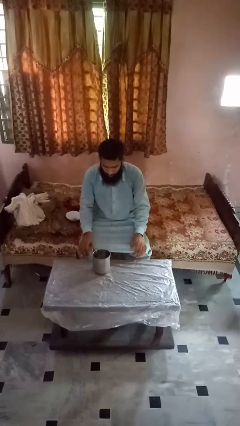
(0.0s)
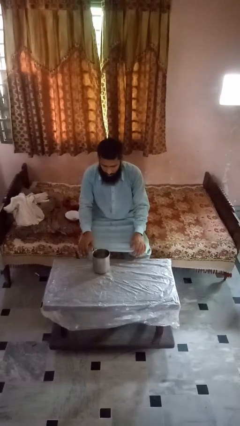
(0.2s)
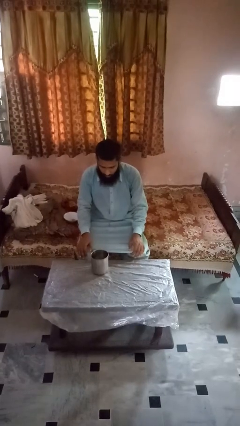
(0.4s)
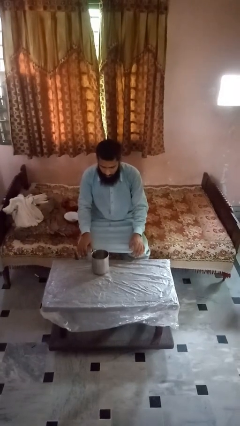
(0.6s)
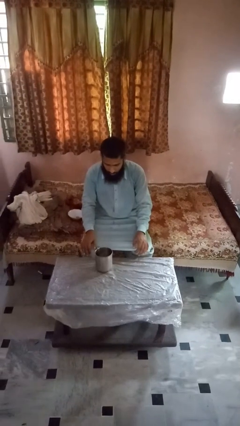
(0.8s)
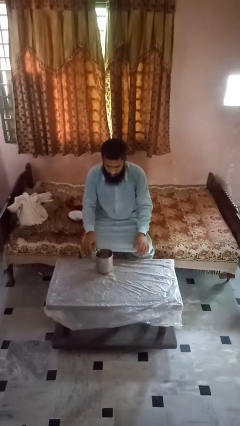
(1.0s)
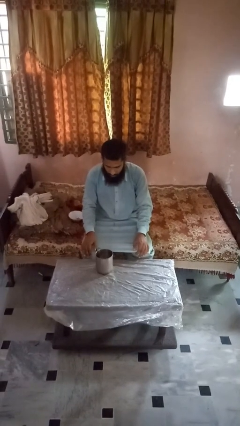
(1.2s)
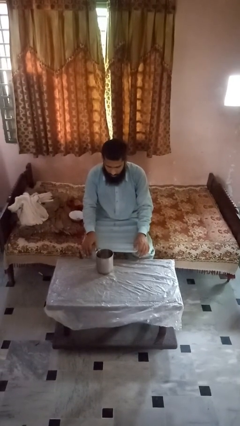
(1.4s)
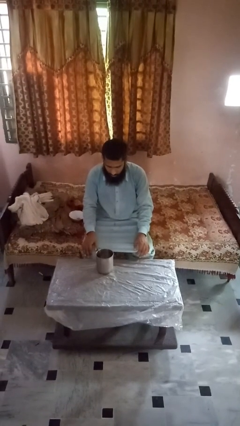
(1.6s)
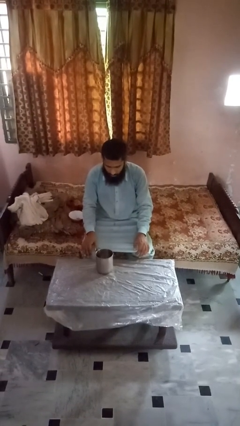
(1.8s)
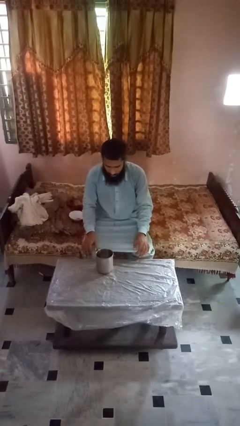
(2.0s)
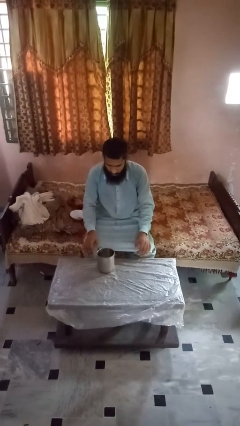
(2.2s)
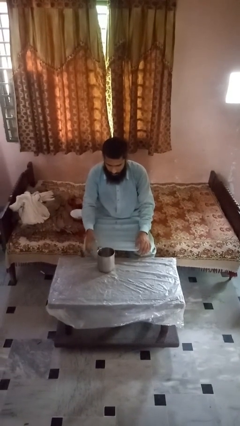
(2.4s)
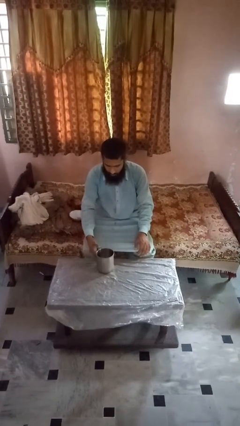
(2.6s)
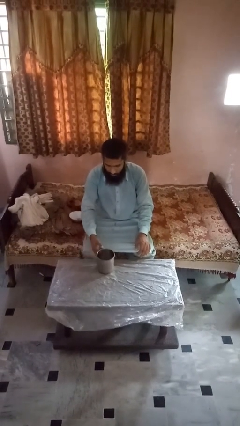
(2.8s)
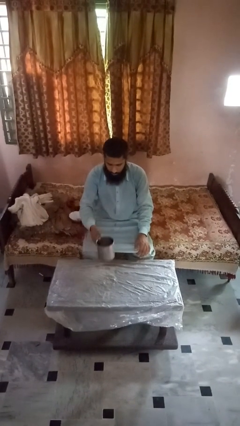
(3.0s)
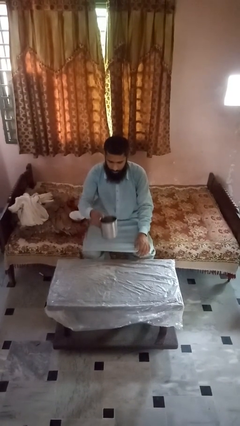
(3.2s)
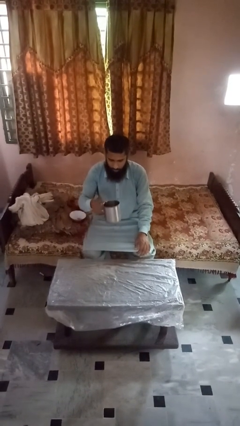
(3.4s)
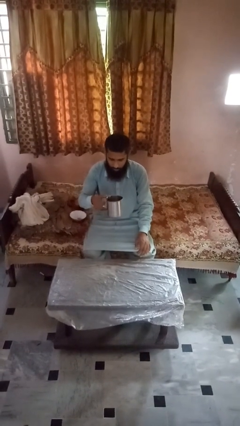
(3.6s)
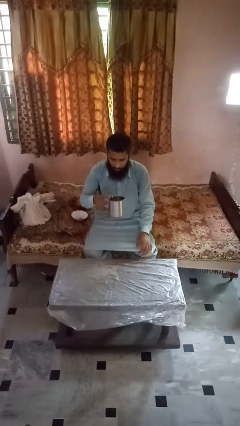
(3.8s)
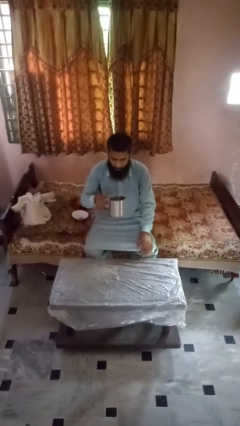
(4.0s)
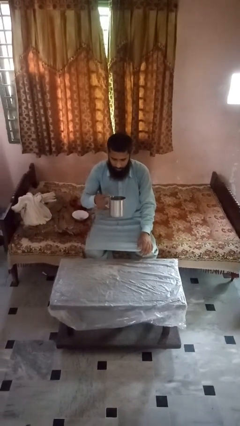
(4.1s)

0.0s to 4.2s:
person picks up object from table

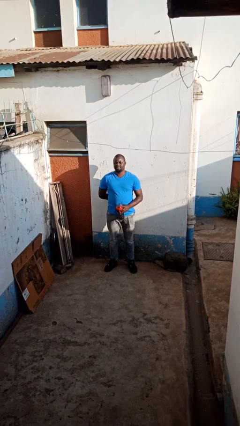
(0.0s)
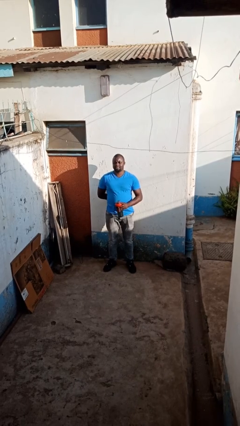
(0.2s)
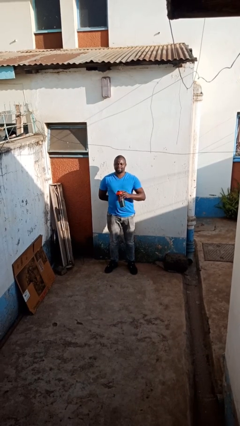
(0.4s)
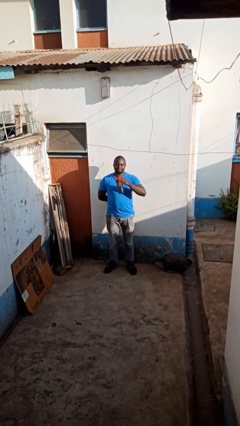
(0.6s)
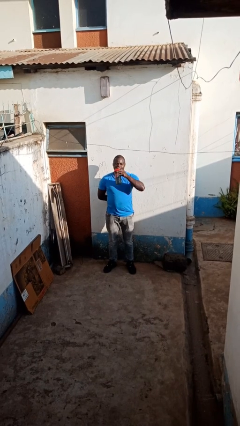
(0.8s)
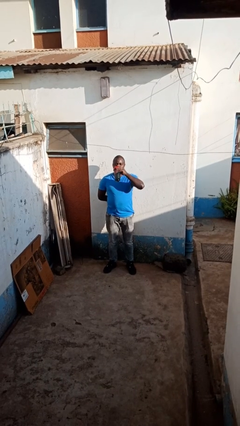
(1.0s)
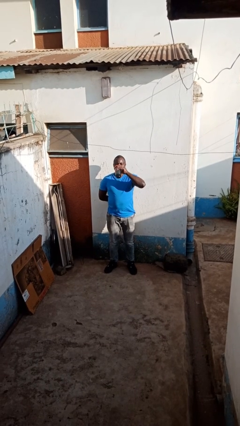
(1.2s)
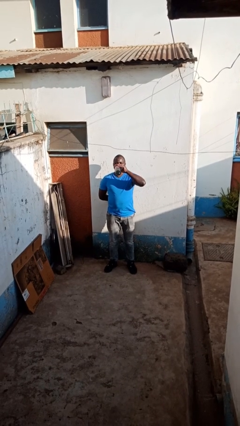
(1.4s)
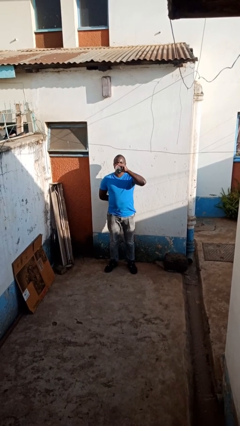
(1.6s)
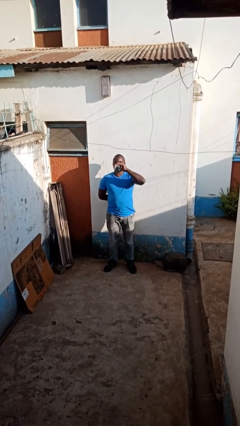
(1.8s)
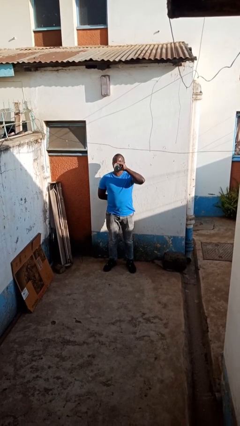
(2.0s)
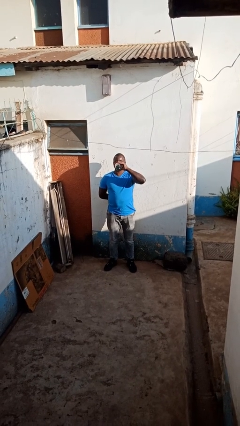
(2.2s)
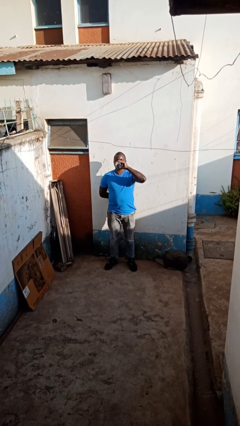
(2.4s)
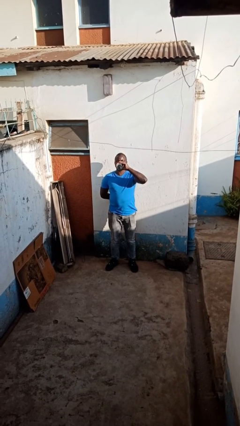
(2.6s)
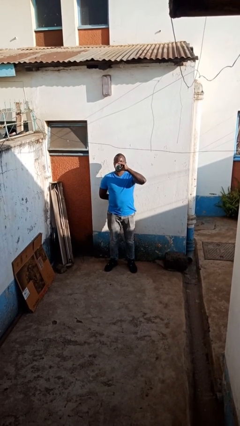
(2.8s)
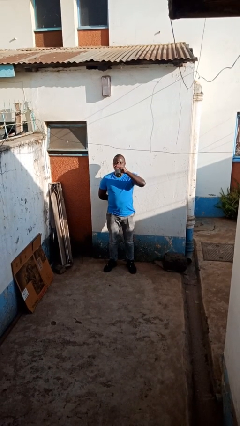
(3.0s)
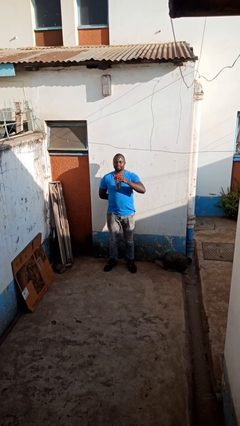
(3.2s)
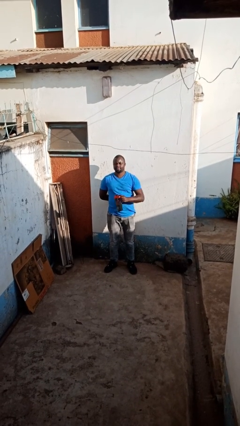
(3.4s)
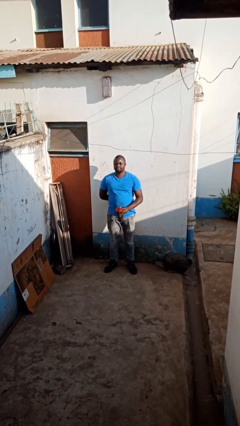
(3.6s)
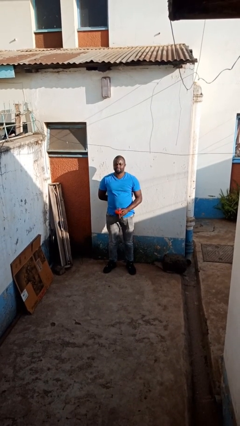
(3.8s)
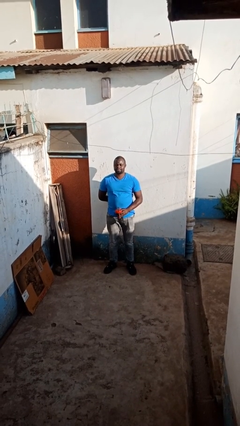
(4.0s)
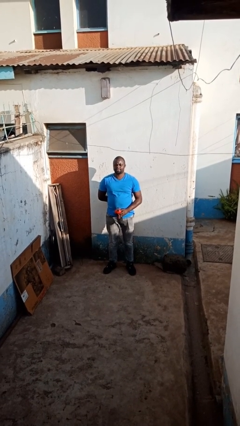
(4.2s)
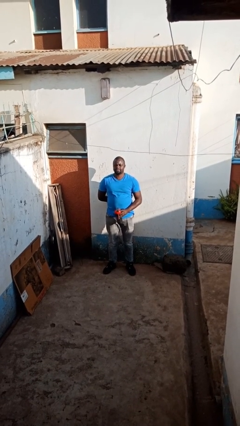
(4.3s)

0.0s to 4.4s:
person drinks from bottle

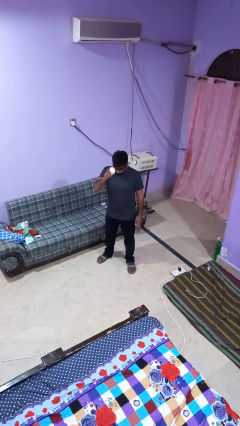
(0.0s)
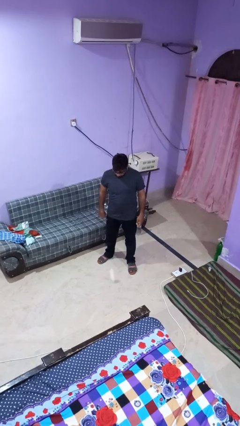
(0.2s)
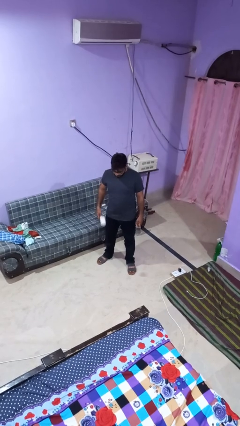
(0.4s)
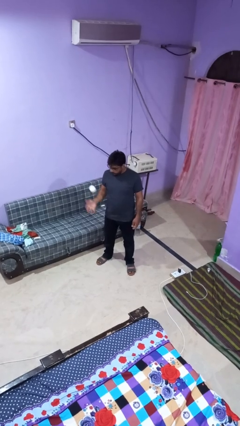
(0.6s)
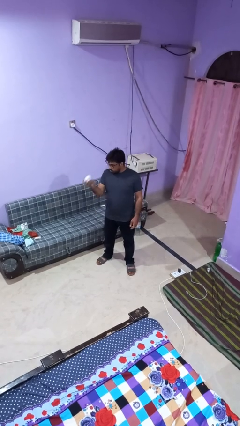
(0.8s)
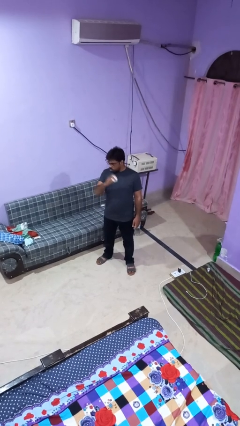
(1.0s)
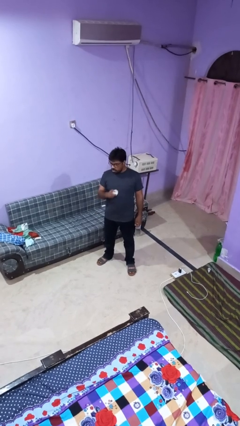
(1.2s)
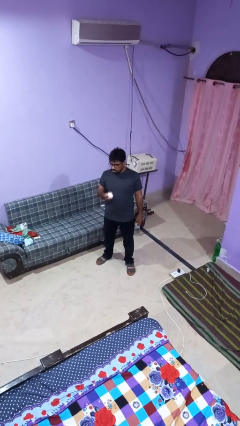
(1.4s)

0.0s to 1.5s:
person bounces ball on floor

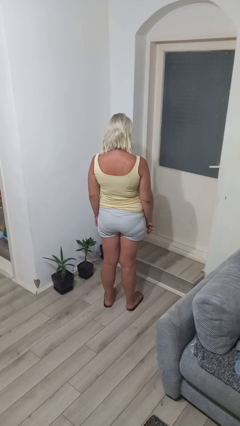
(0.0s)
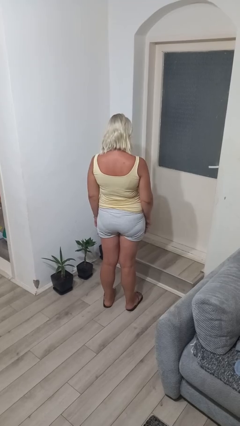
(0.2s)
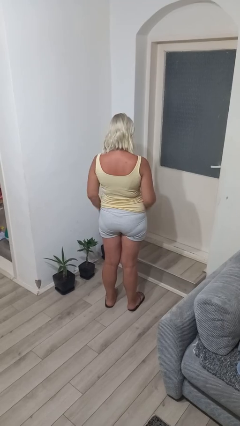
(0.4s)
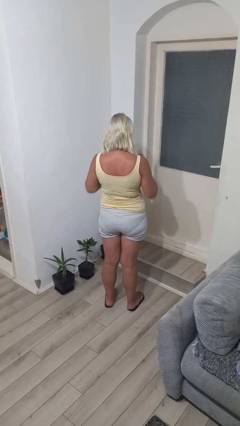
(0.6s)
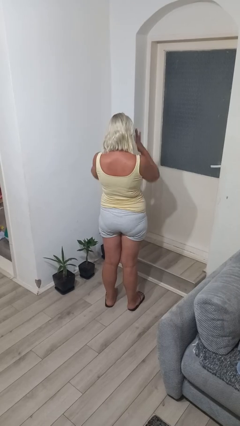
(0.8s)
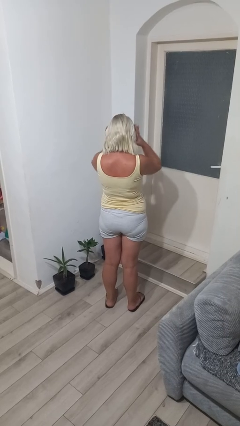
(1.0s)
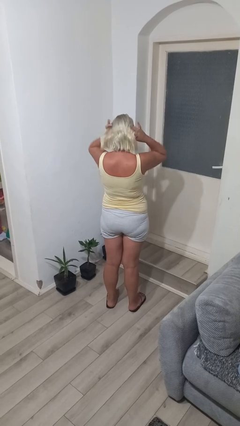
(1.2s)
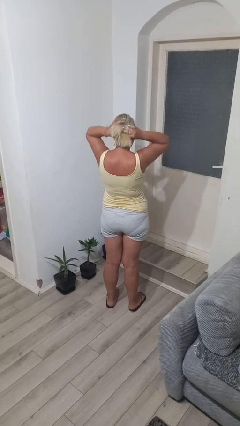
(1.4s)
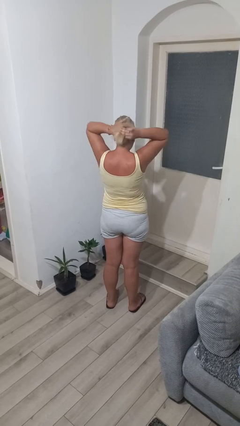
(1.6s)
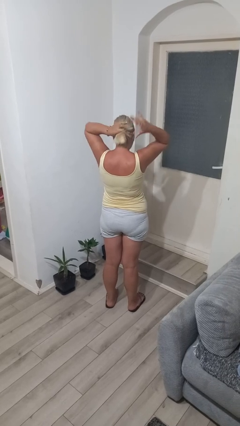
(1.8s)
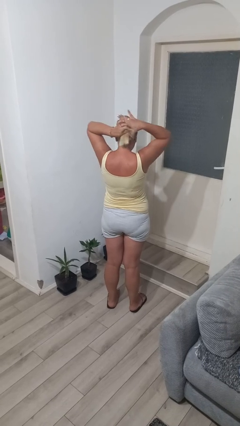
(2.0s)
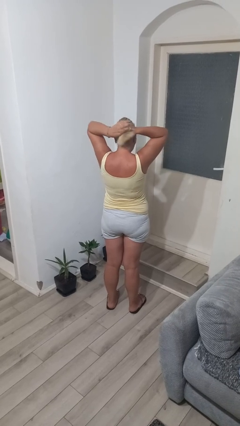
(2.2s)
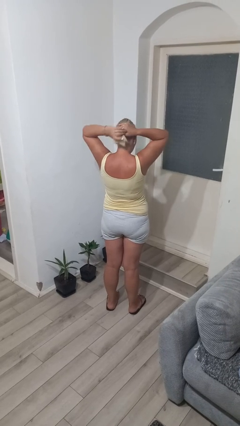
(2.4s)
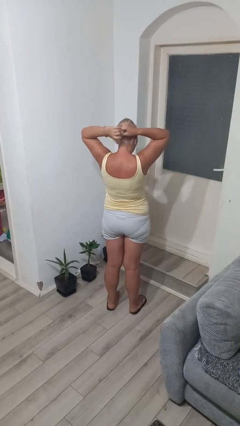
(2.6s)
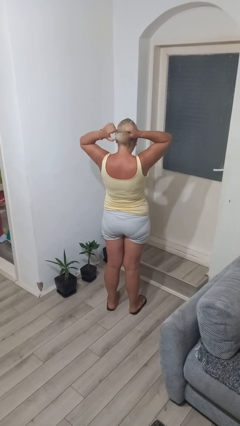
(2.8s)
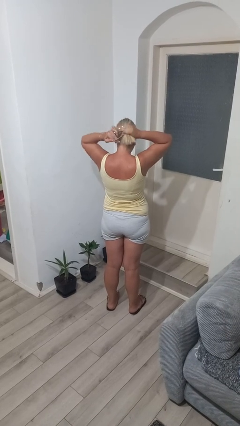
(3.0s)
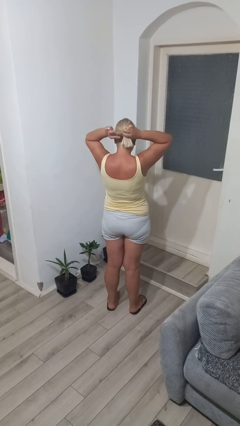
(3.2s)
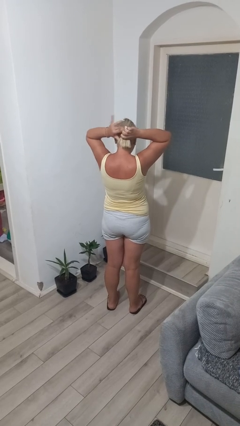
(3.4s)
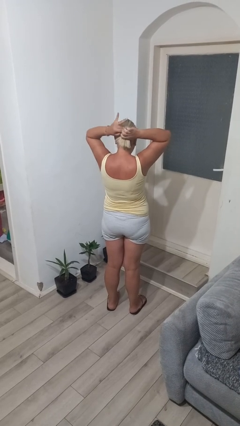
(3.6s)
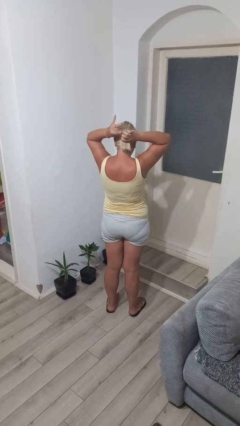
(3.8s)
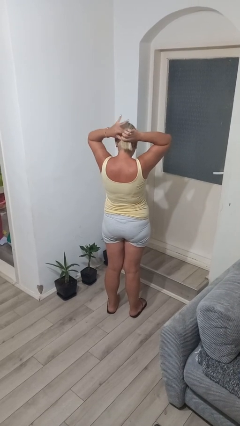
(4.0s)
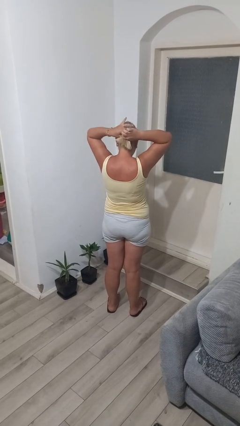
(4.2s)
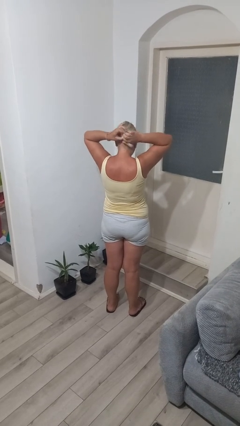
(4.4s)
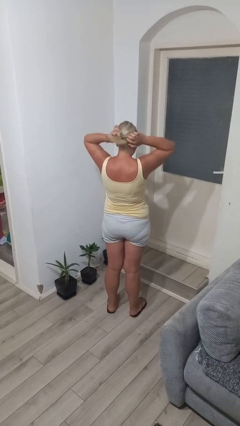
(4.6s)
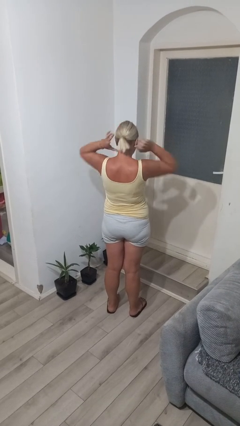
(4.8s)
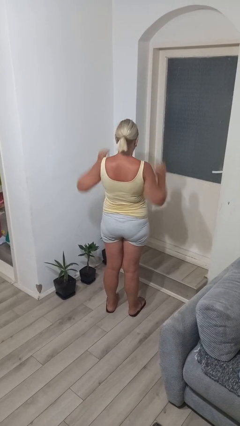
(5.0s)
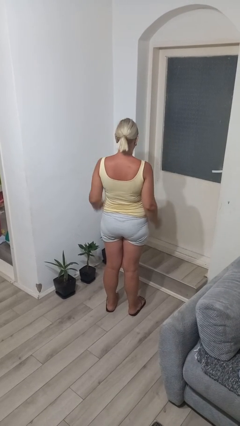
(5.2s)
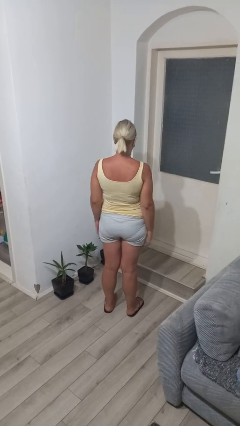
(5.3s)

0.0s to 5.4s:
person puts hair in ponytail

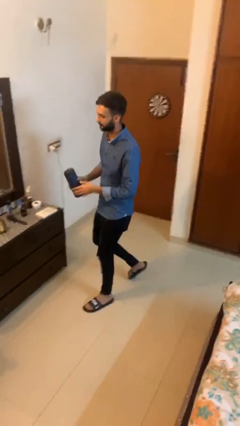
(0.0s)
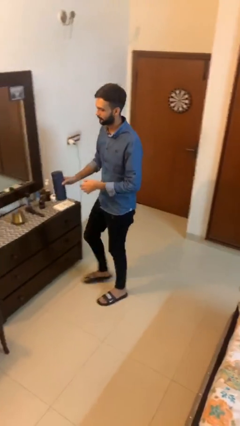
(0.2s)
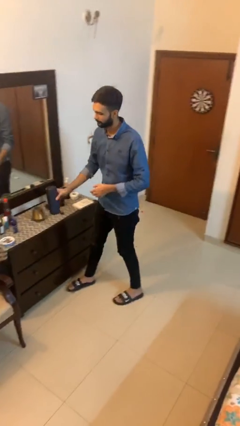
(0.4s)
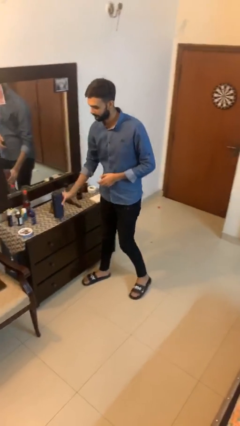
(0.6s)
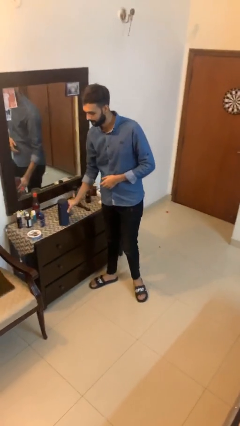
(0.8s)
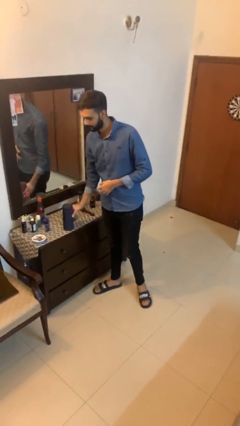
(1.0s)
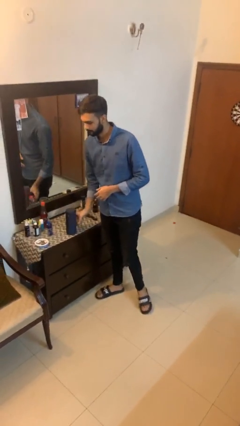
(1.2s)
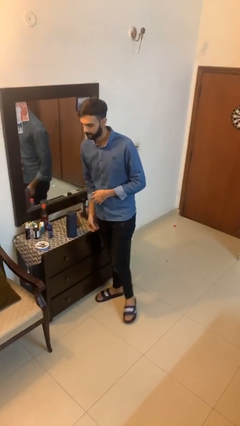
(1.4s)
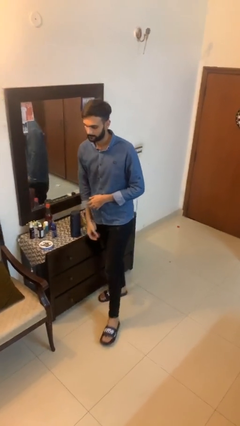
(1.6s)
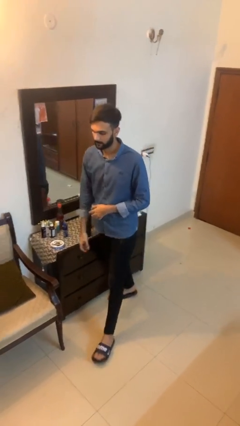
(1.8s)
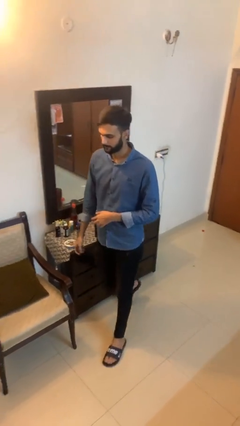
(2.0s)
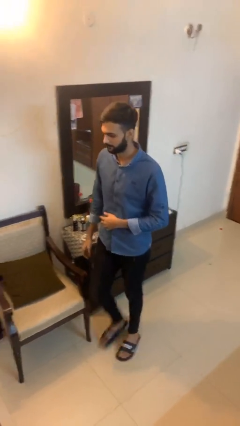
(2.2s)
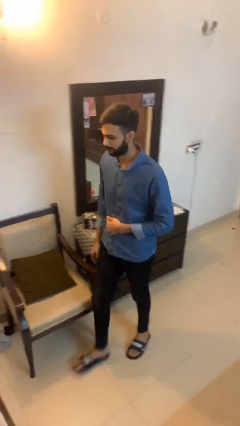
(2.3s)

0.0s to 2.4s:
person puts down object on table
